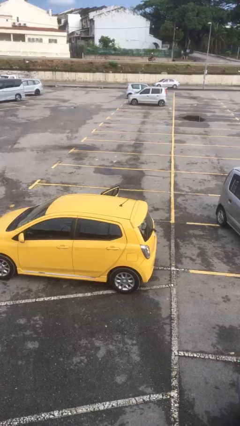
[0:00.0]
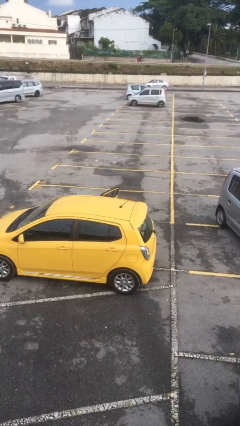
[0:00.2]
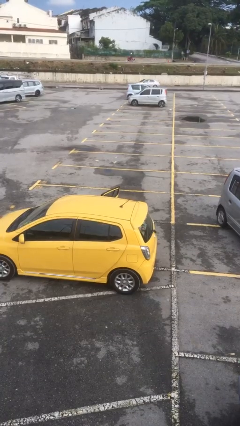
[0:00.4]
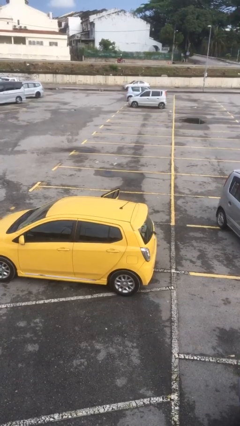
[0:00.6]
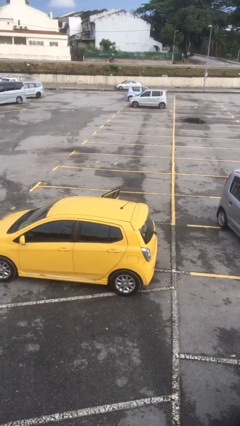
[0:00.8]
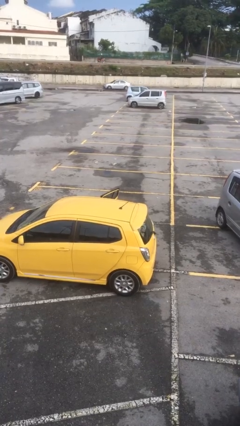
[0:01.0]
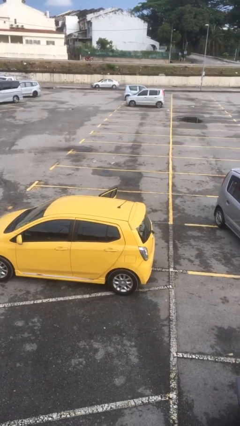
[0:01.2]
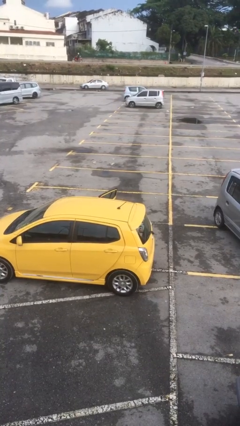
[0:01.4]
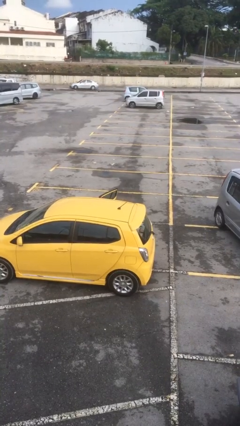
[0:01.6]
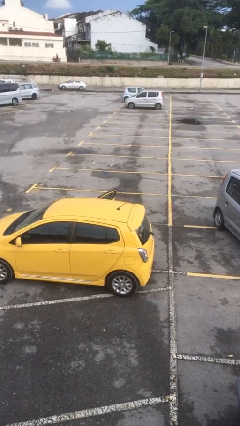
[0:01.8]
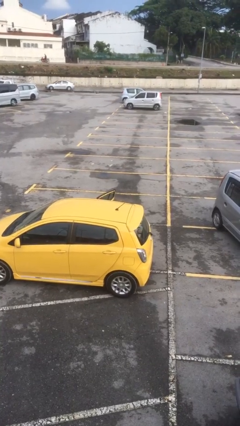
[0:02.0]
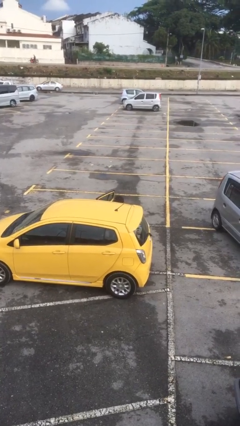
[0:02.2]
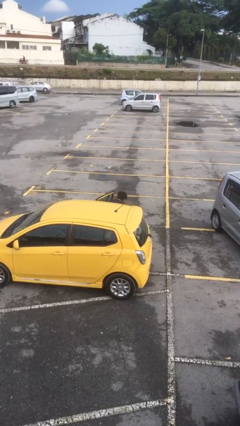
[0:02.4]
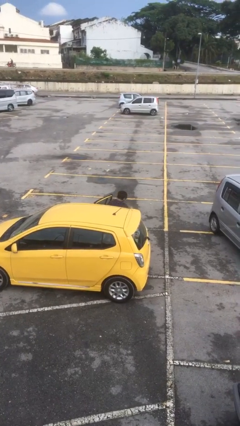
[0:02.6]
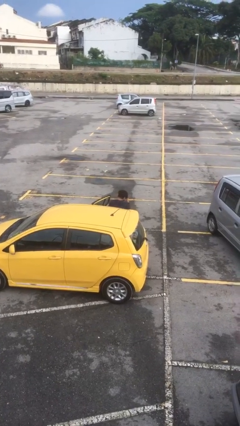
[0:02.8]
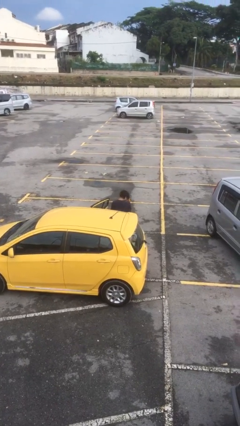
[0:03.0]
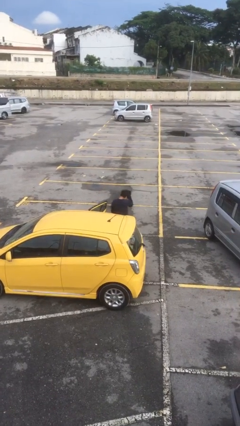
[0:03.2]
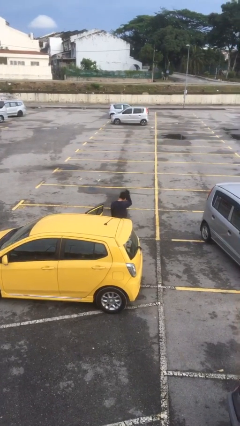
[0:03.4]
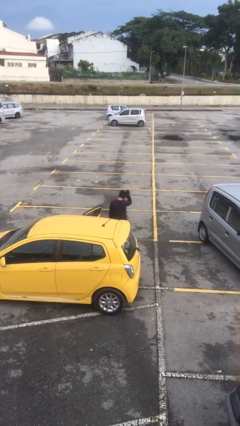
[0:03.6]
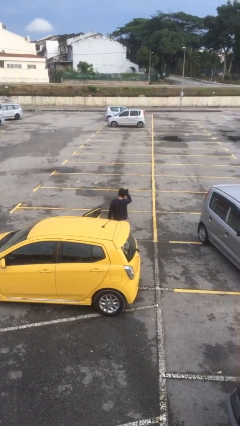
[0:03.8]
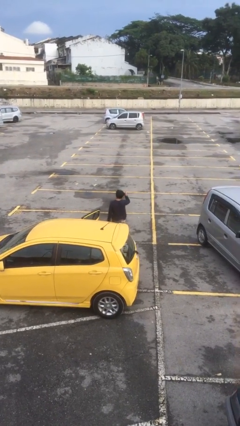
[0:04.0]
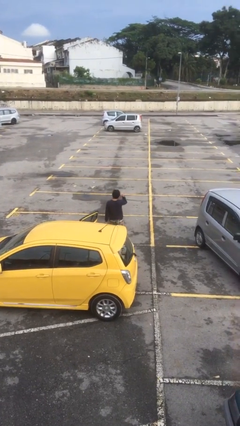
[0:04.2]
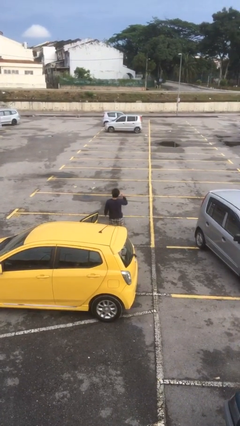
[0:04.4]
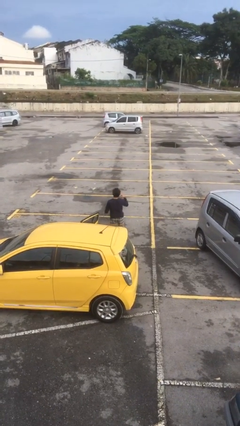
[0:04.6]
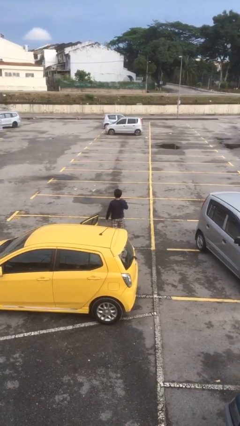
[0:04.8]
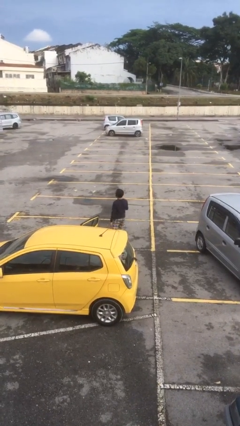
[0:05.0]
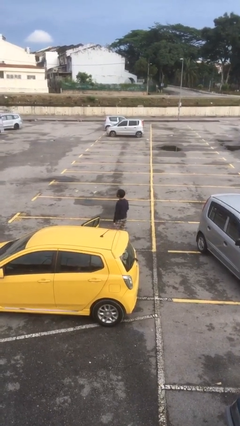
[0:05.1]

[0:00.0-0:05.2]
person exits car

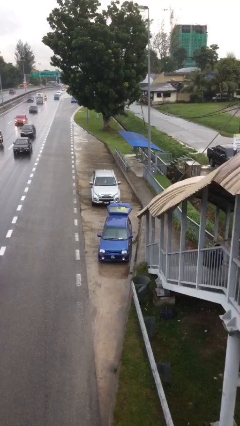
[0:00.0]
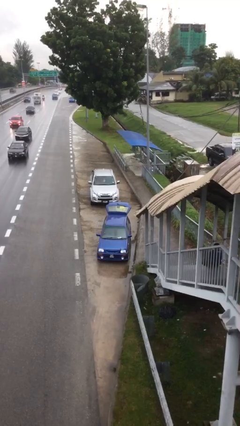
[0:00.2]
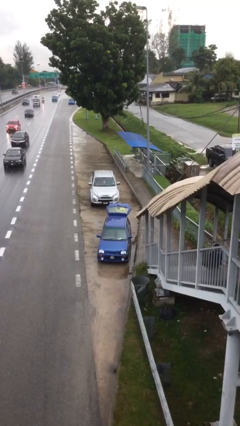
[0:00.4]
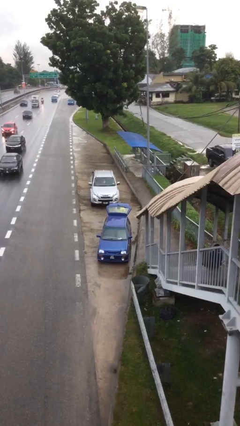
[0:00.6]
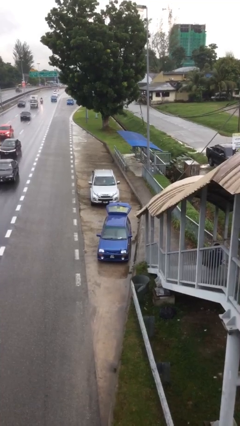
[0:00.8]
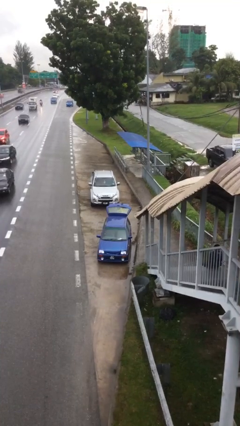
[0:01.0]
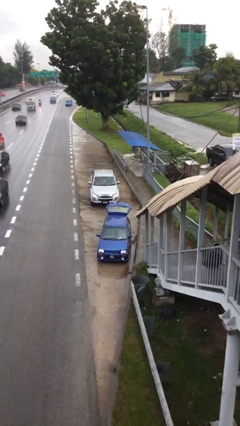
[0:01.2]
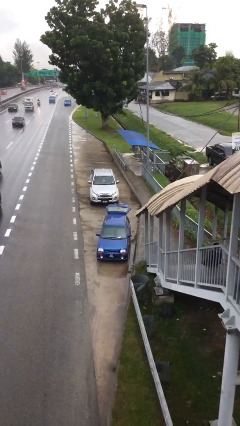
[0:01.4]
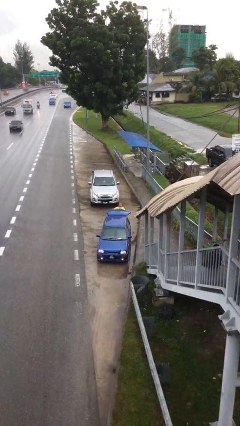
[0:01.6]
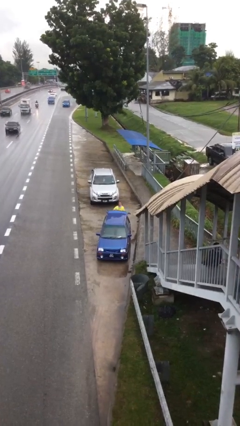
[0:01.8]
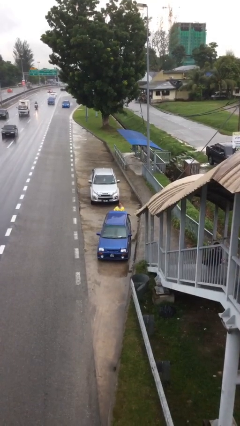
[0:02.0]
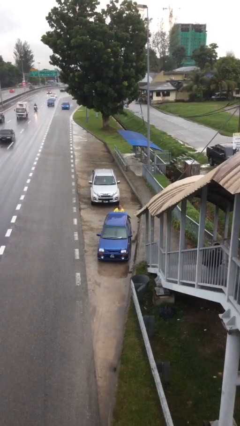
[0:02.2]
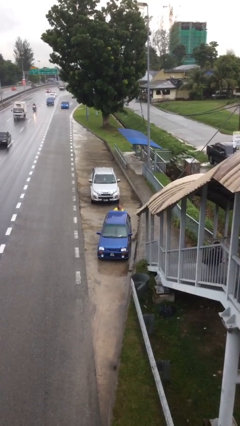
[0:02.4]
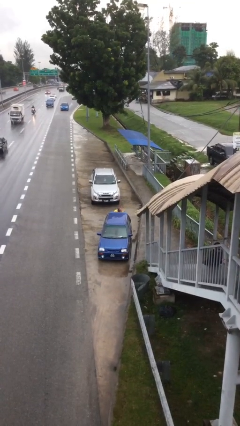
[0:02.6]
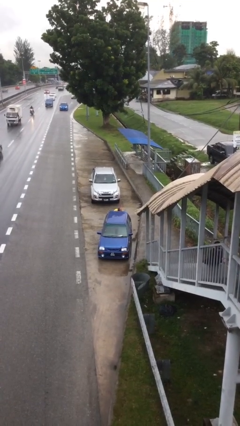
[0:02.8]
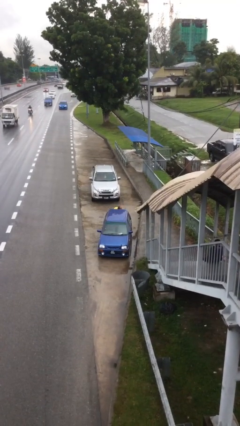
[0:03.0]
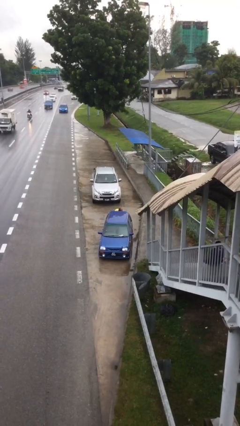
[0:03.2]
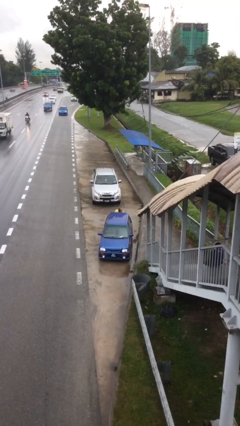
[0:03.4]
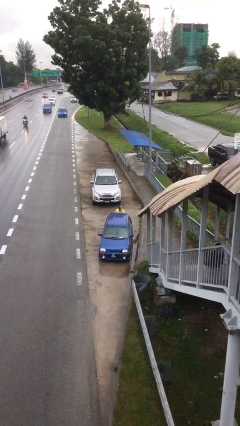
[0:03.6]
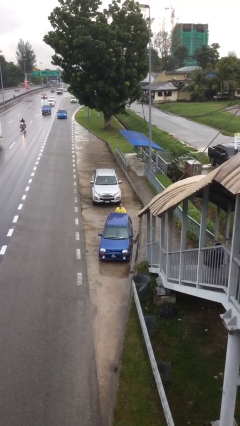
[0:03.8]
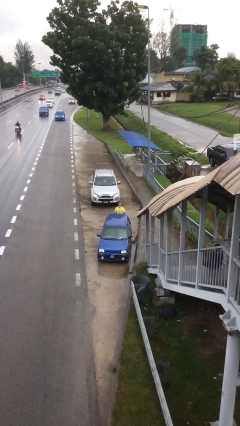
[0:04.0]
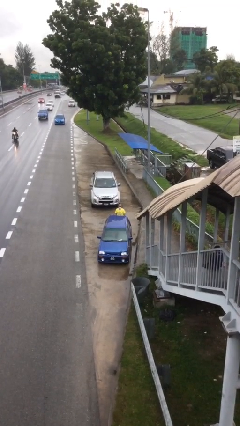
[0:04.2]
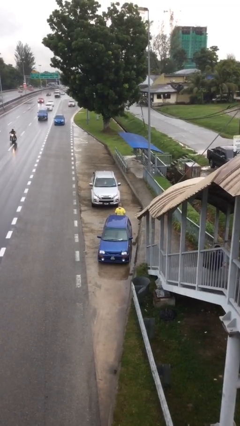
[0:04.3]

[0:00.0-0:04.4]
person closes car trunk

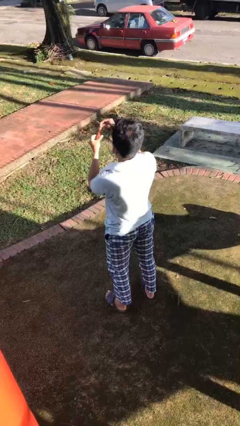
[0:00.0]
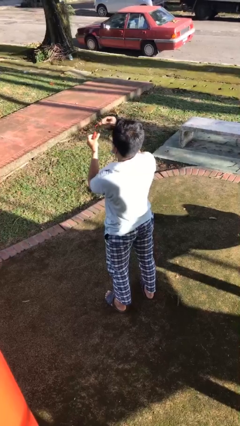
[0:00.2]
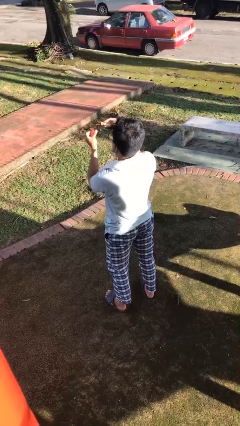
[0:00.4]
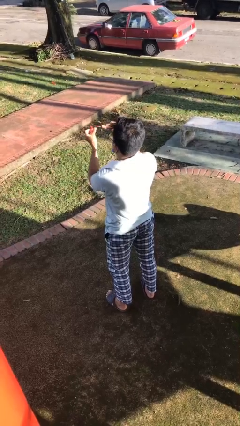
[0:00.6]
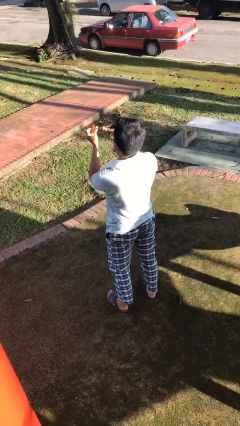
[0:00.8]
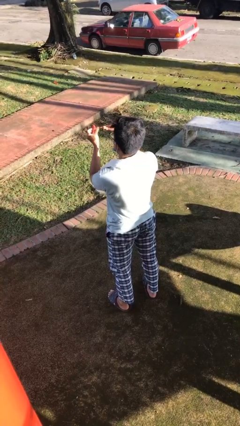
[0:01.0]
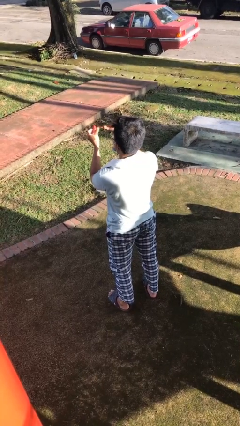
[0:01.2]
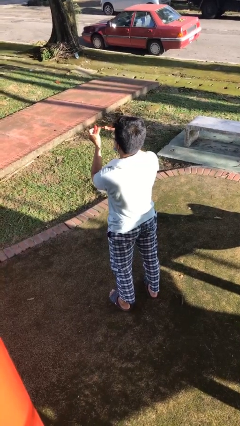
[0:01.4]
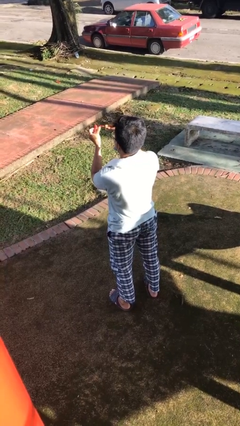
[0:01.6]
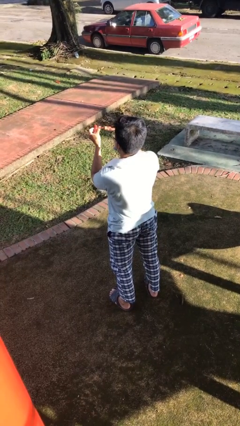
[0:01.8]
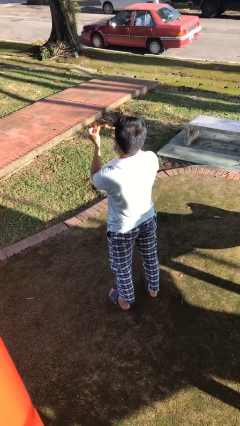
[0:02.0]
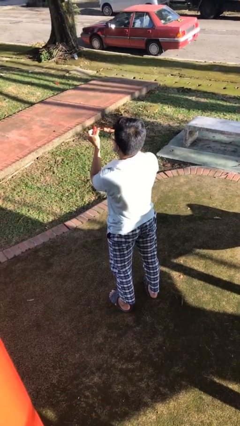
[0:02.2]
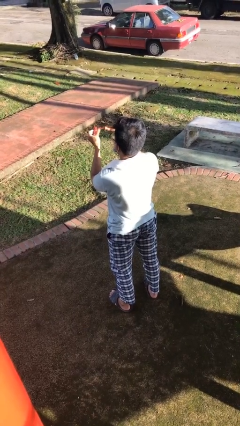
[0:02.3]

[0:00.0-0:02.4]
person paints fingernails

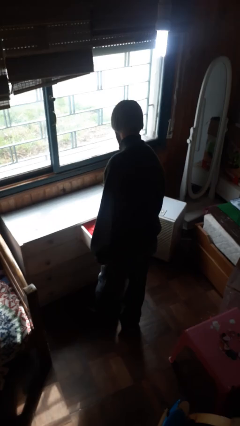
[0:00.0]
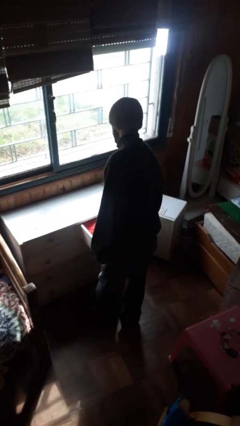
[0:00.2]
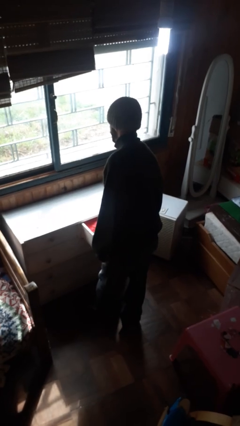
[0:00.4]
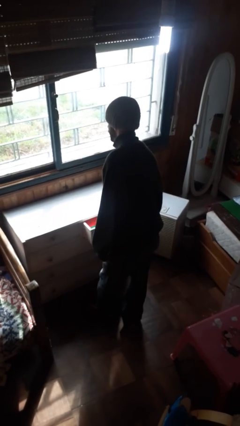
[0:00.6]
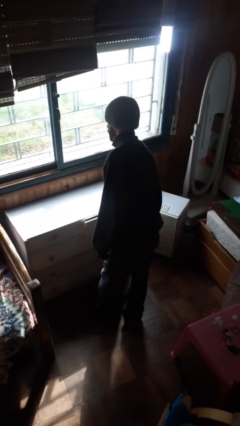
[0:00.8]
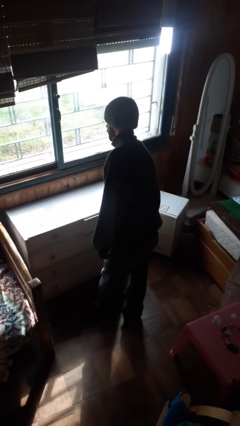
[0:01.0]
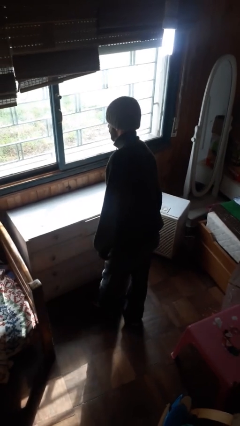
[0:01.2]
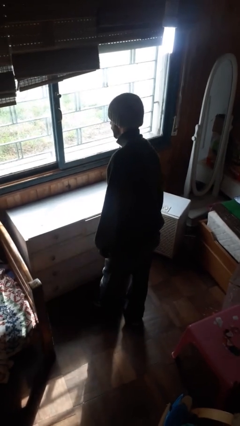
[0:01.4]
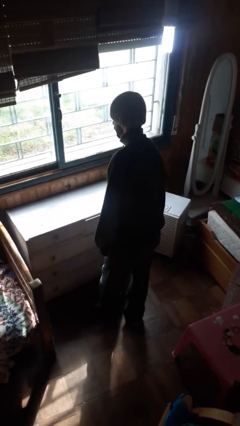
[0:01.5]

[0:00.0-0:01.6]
person closes dresser drawer

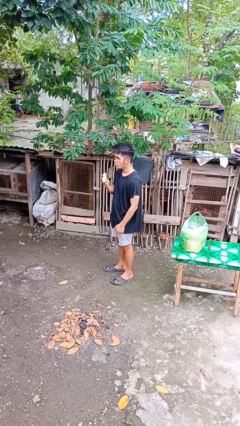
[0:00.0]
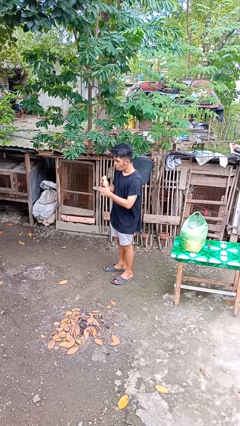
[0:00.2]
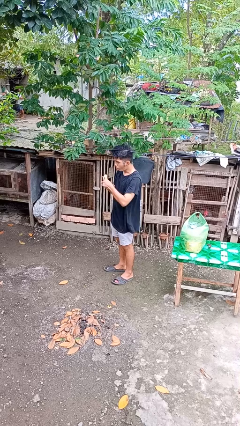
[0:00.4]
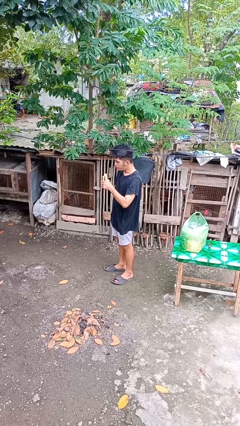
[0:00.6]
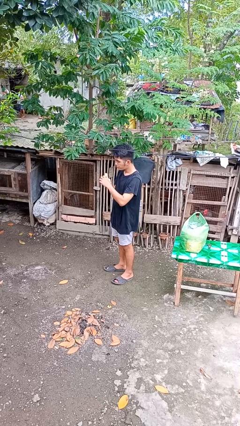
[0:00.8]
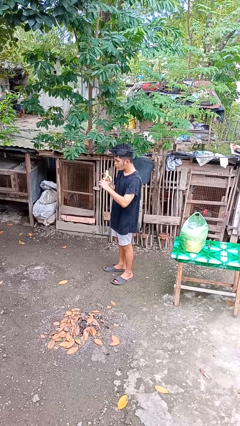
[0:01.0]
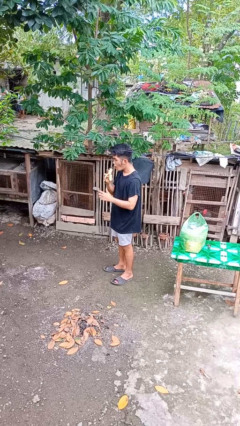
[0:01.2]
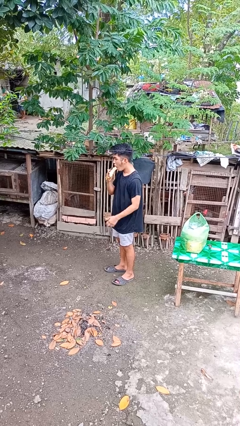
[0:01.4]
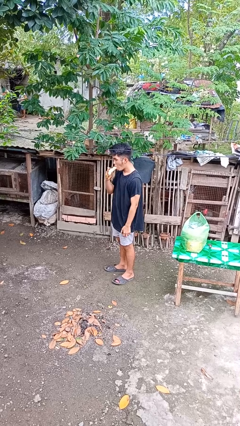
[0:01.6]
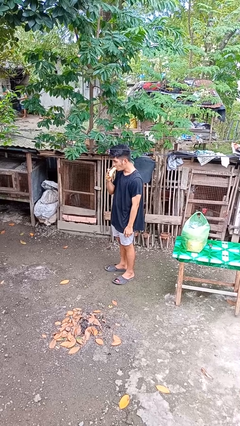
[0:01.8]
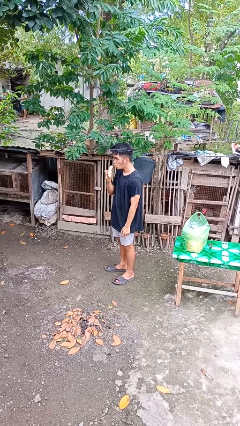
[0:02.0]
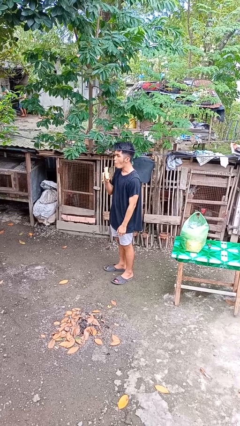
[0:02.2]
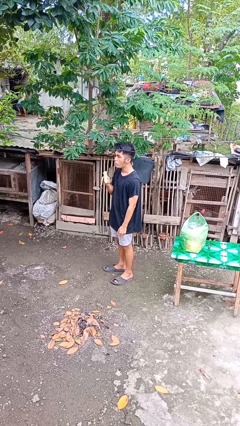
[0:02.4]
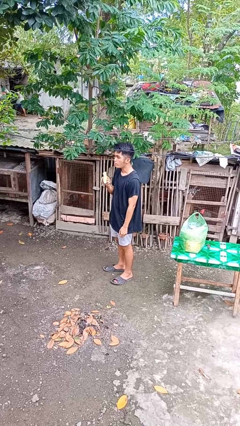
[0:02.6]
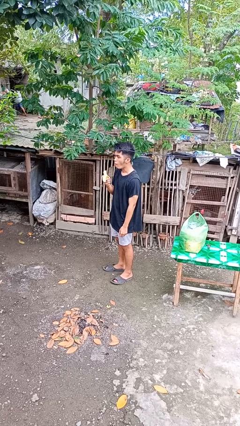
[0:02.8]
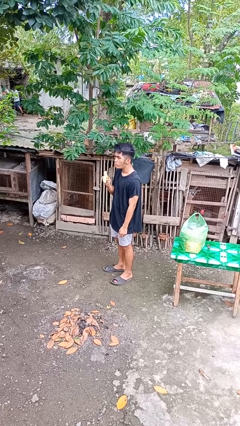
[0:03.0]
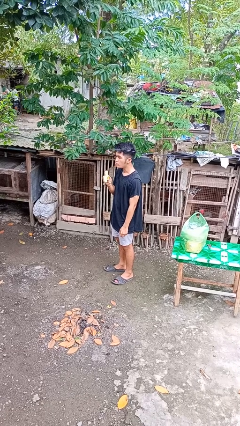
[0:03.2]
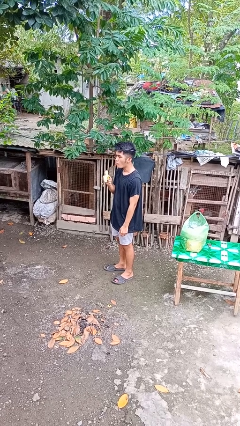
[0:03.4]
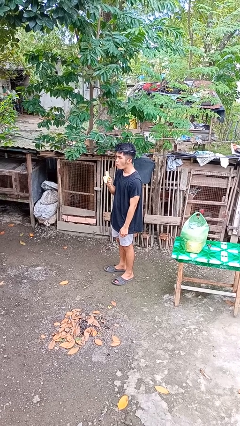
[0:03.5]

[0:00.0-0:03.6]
person eats banana

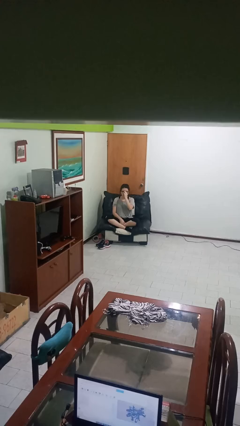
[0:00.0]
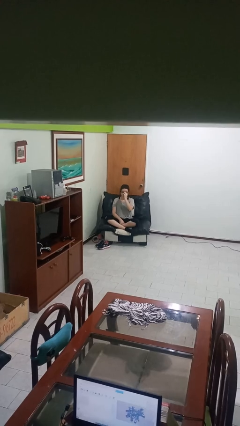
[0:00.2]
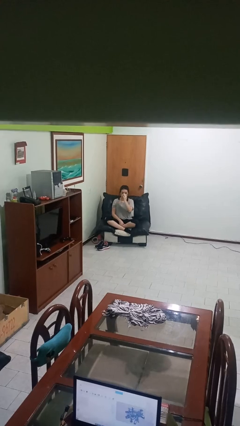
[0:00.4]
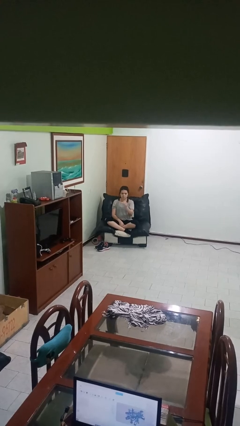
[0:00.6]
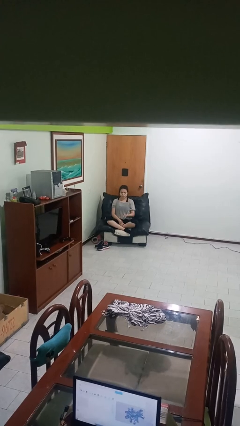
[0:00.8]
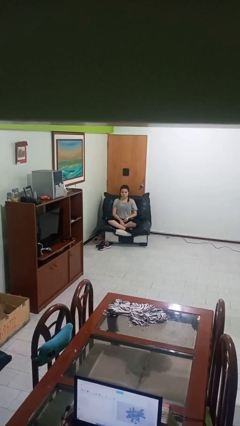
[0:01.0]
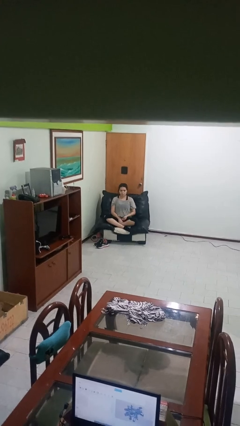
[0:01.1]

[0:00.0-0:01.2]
person takes off glasses
